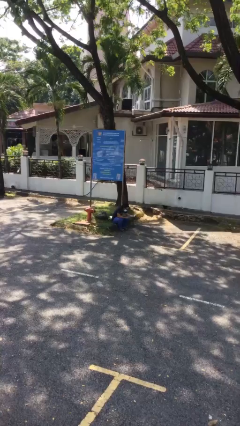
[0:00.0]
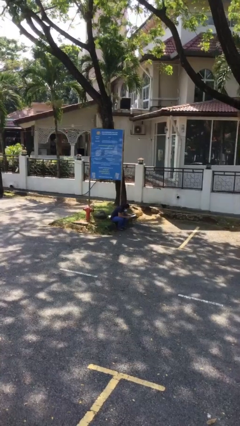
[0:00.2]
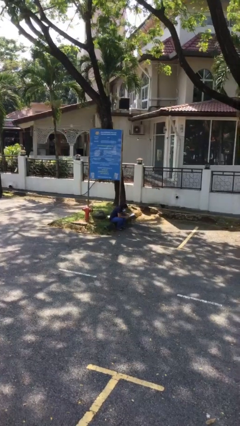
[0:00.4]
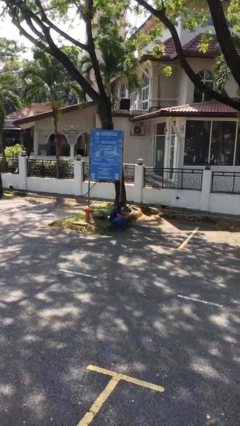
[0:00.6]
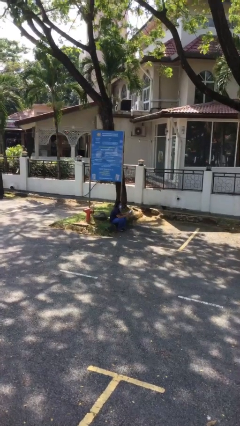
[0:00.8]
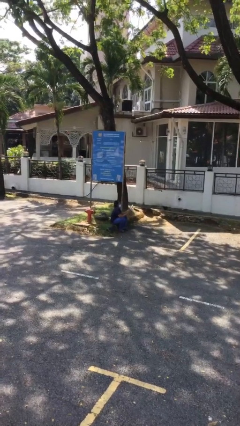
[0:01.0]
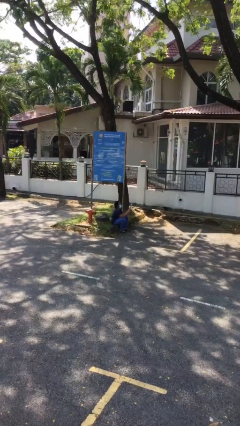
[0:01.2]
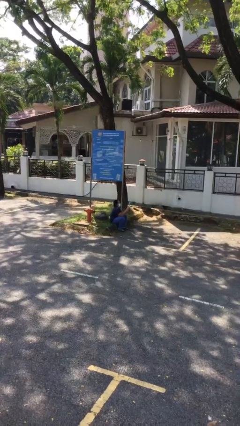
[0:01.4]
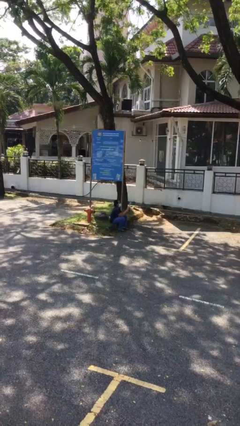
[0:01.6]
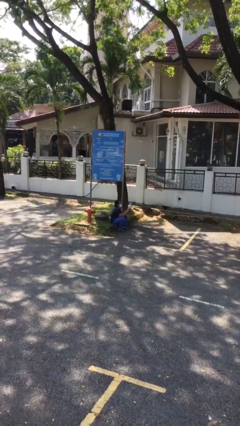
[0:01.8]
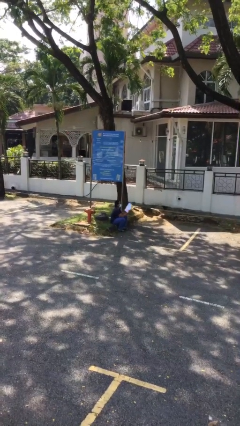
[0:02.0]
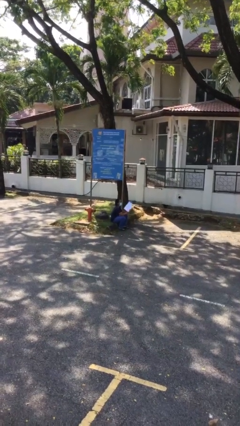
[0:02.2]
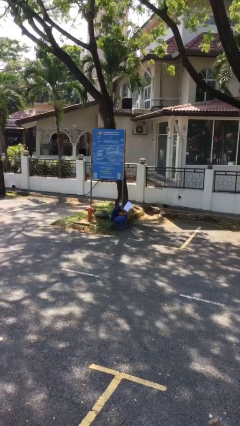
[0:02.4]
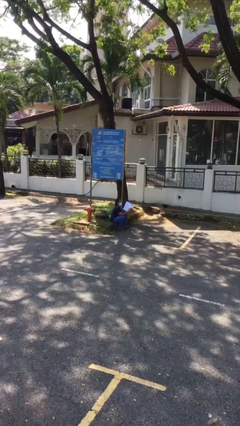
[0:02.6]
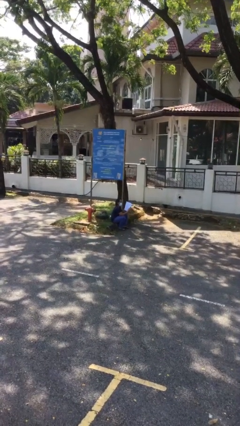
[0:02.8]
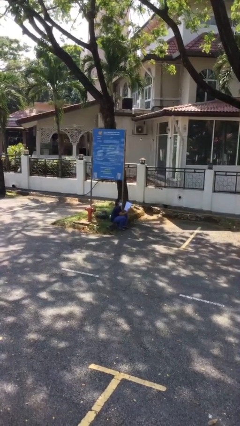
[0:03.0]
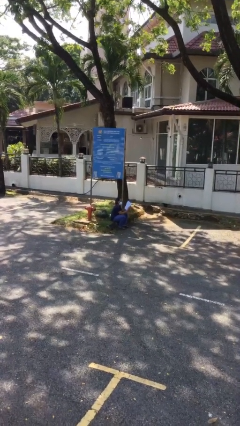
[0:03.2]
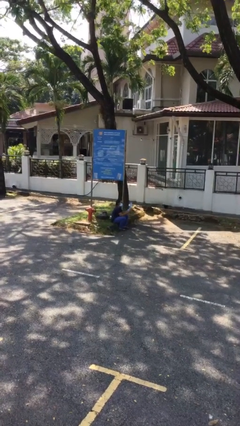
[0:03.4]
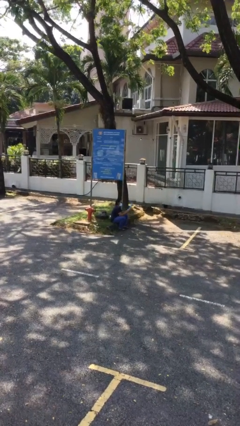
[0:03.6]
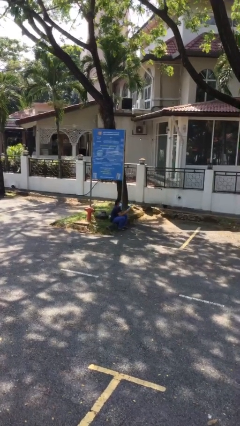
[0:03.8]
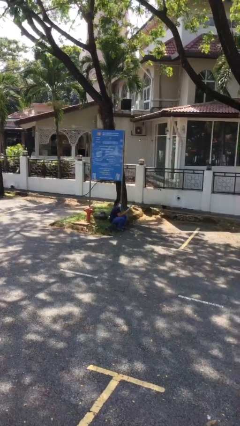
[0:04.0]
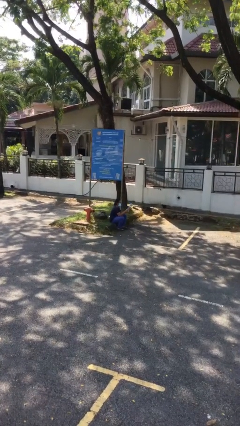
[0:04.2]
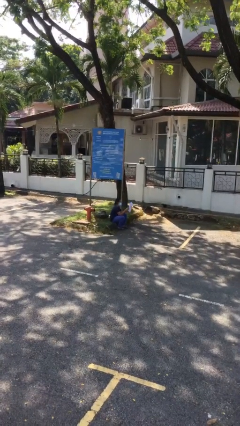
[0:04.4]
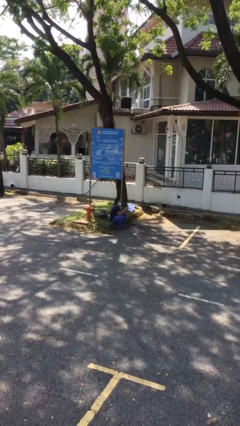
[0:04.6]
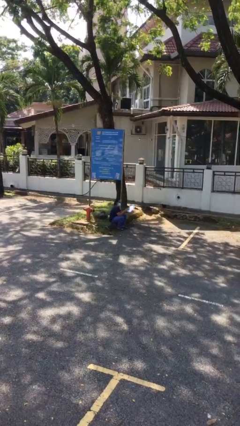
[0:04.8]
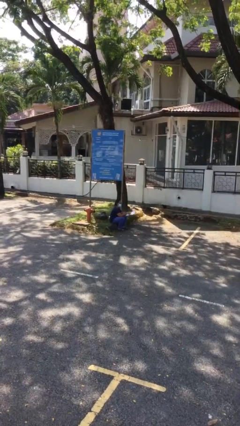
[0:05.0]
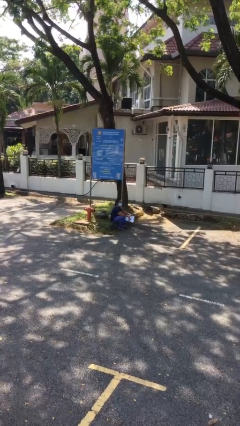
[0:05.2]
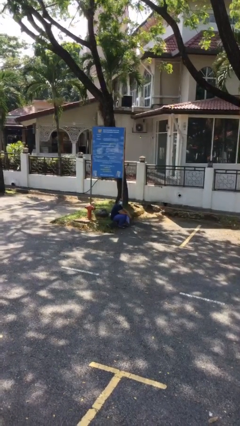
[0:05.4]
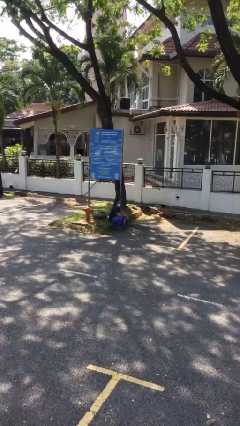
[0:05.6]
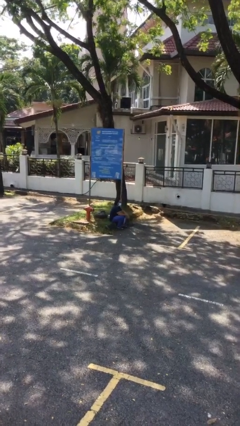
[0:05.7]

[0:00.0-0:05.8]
person reads document

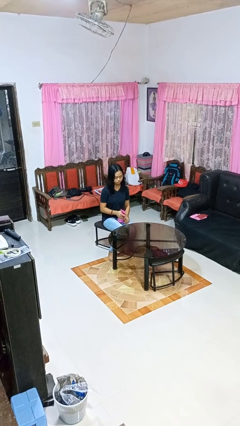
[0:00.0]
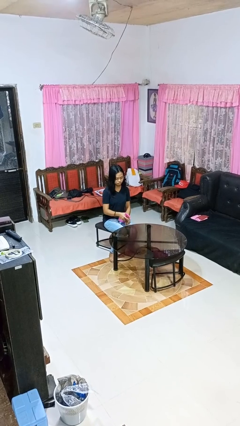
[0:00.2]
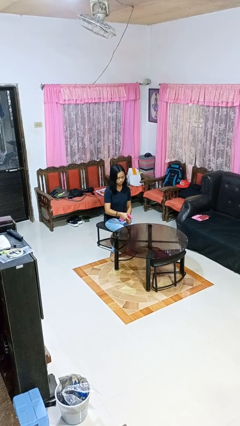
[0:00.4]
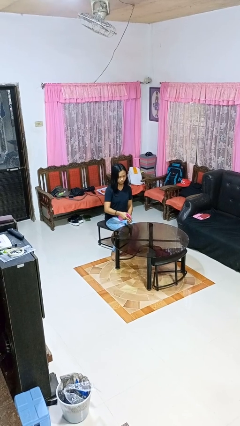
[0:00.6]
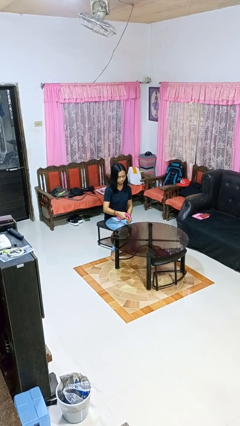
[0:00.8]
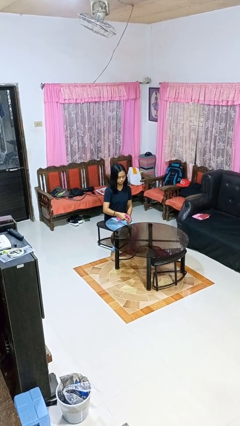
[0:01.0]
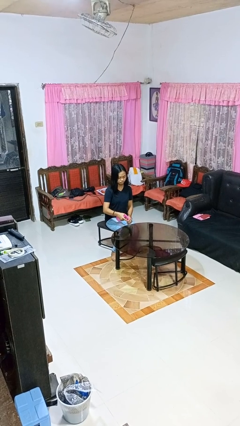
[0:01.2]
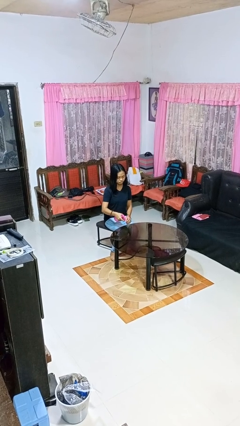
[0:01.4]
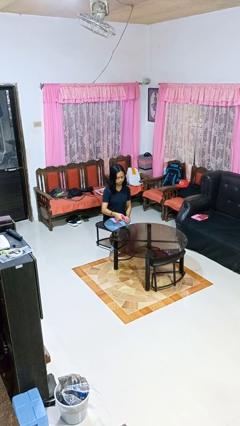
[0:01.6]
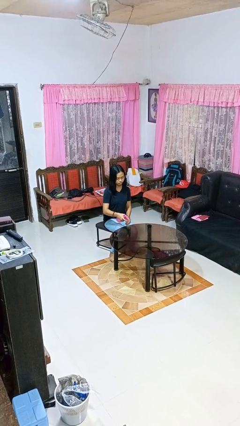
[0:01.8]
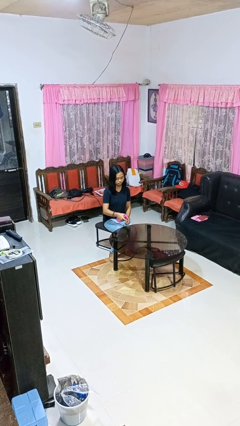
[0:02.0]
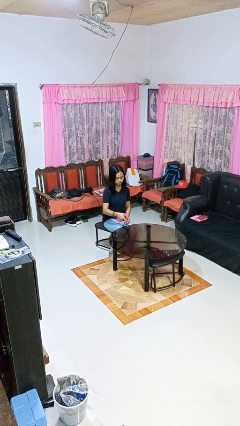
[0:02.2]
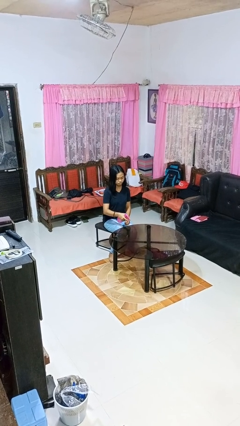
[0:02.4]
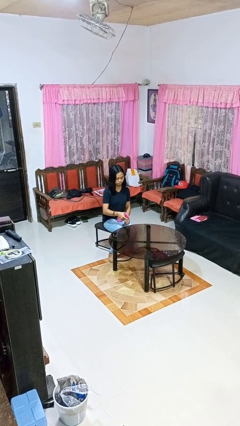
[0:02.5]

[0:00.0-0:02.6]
person sprays from bottle

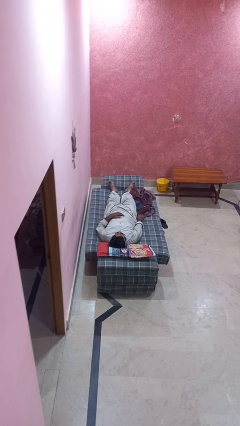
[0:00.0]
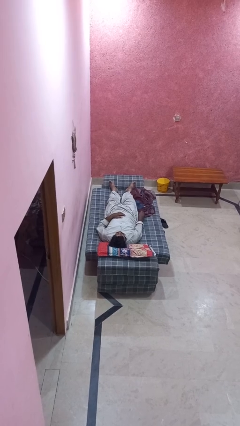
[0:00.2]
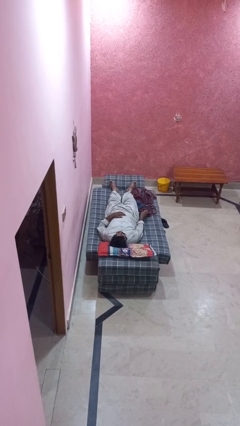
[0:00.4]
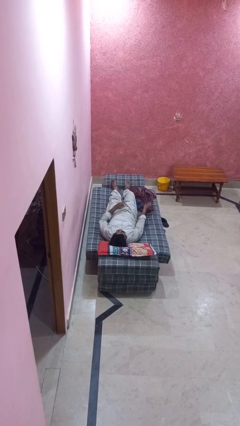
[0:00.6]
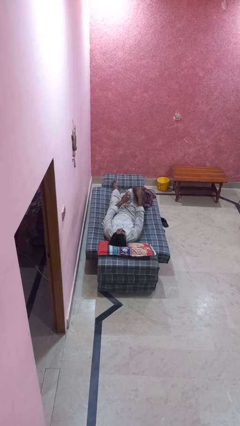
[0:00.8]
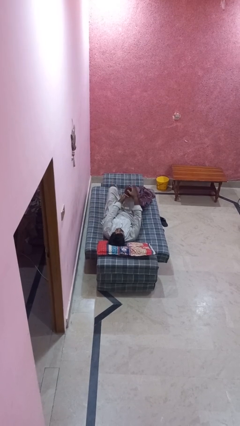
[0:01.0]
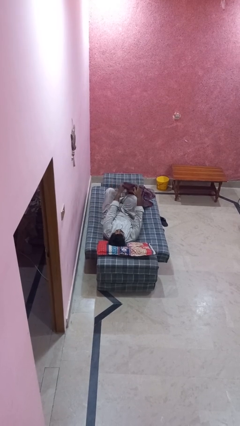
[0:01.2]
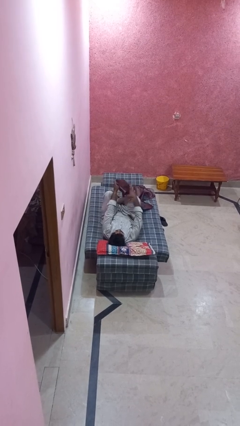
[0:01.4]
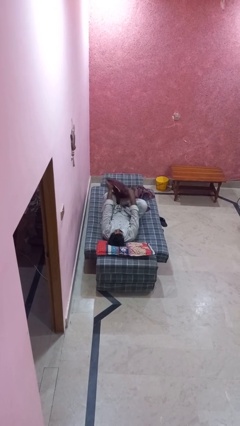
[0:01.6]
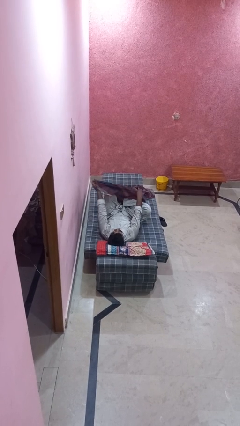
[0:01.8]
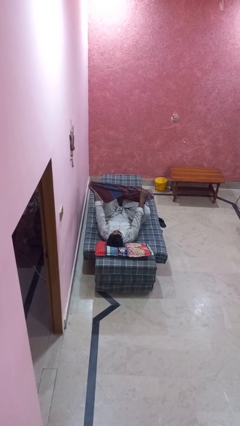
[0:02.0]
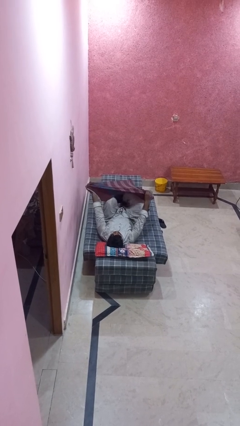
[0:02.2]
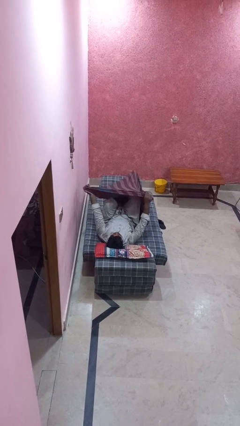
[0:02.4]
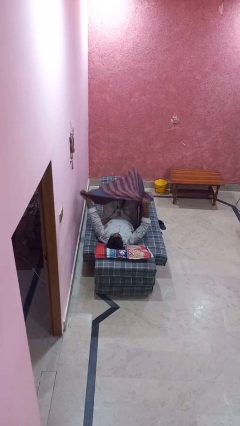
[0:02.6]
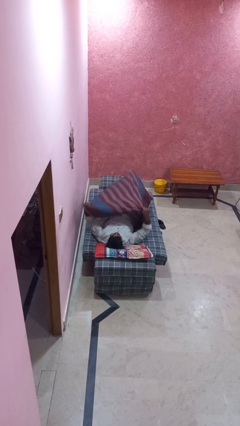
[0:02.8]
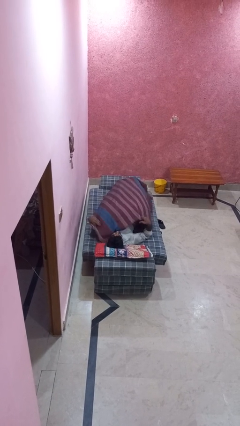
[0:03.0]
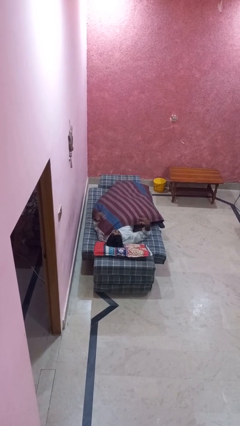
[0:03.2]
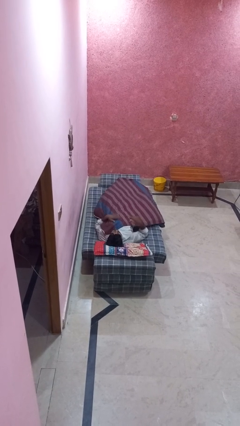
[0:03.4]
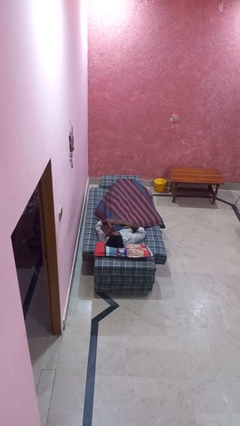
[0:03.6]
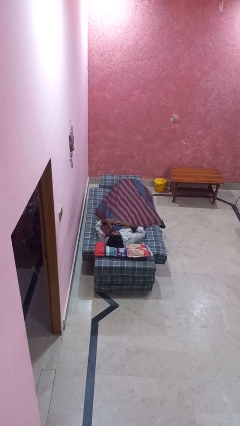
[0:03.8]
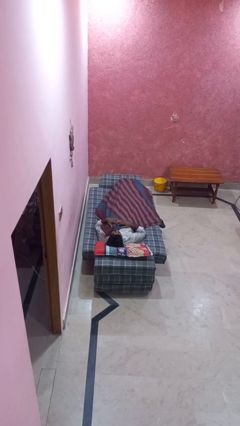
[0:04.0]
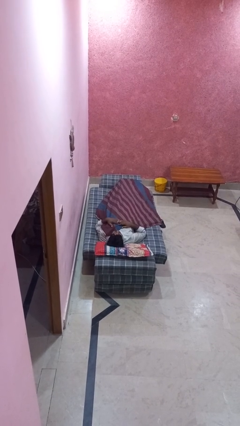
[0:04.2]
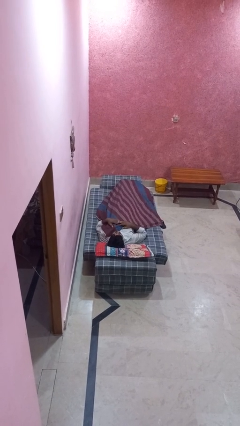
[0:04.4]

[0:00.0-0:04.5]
person covers with bedsheets

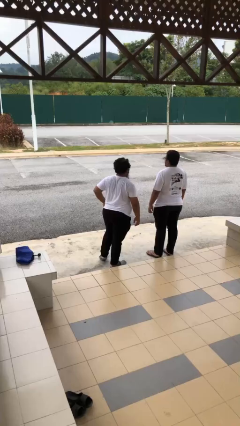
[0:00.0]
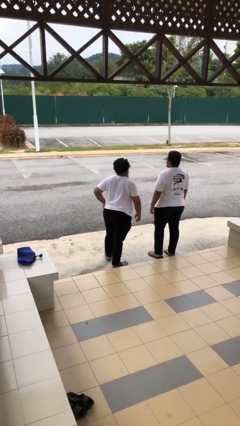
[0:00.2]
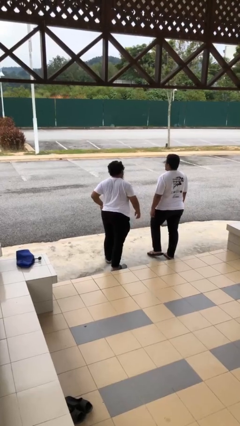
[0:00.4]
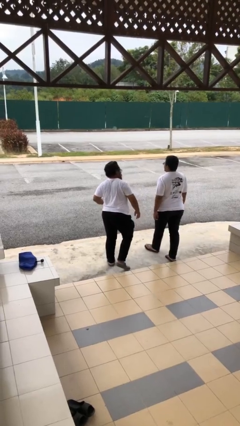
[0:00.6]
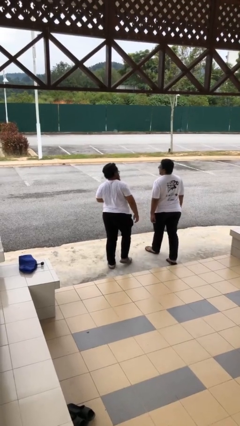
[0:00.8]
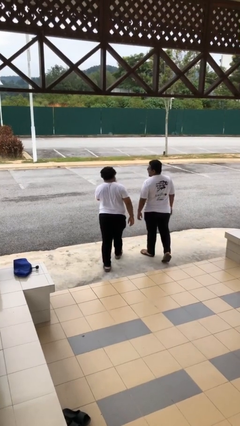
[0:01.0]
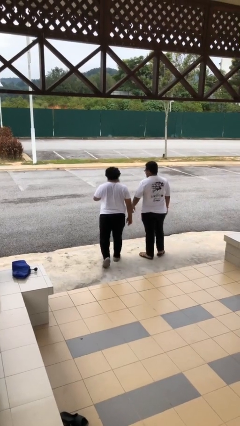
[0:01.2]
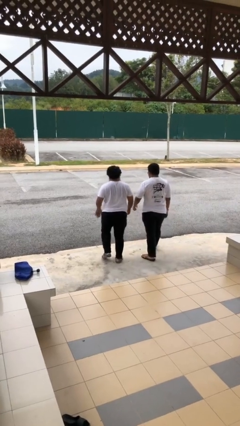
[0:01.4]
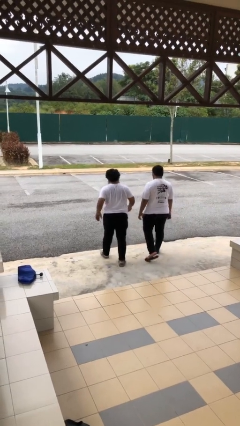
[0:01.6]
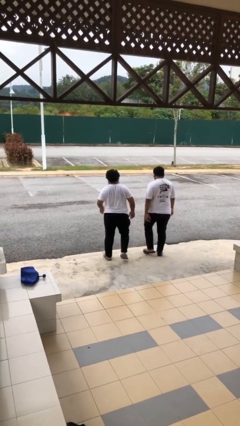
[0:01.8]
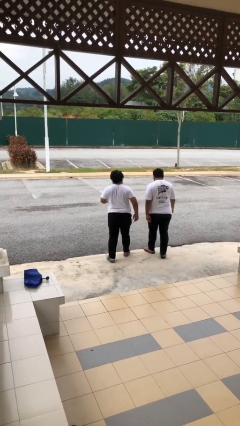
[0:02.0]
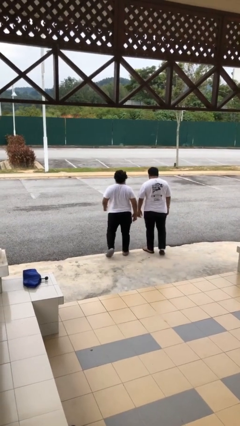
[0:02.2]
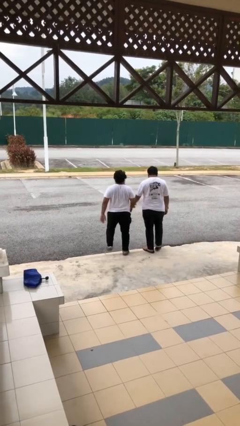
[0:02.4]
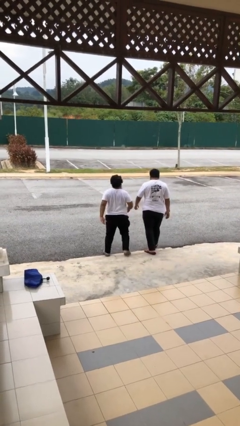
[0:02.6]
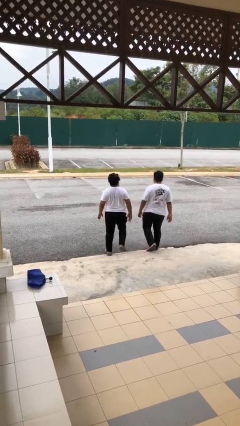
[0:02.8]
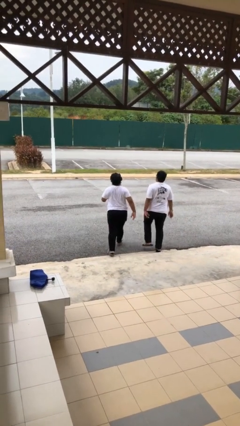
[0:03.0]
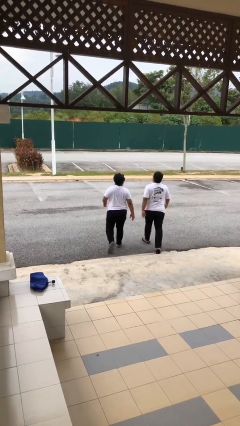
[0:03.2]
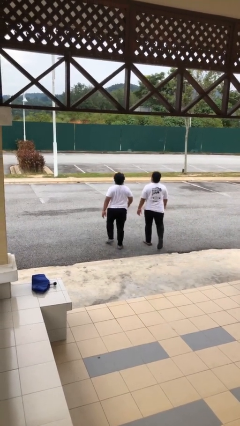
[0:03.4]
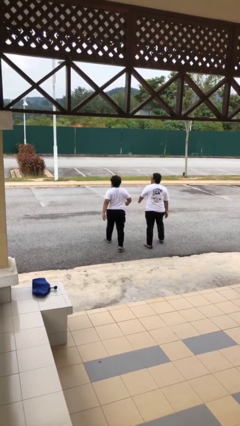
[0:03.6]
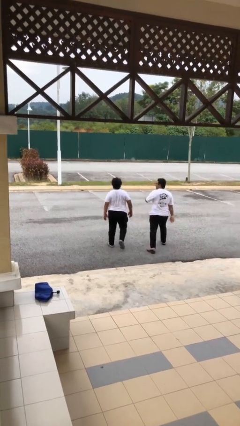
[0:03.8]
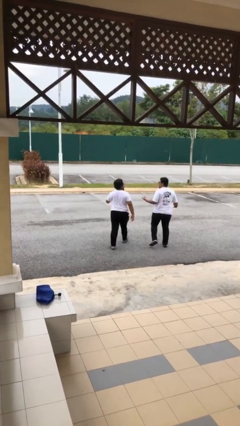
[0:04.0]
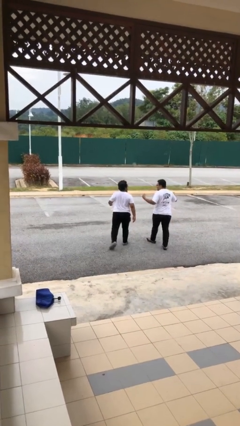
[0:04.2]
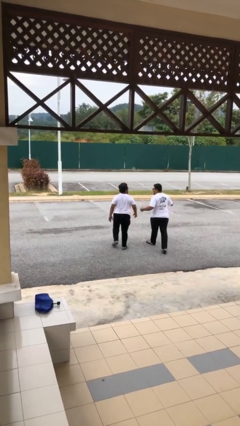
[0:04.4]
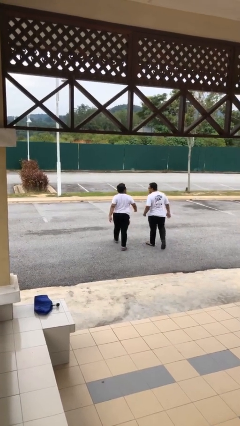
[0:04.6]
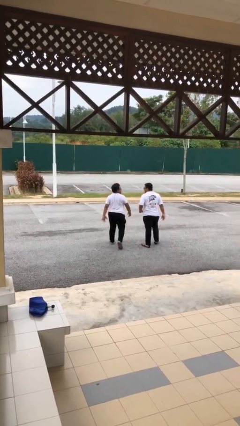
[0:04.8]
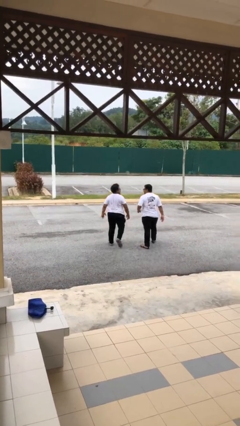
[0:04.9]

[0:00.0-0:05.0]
person talks to person

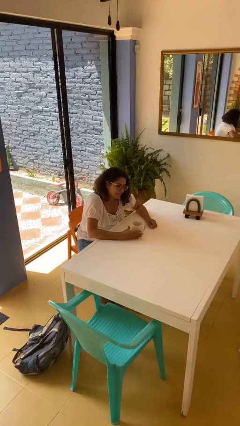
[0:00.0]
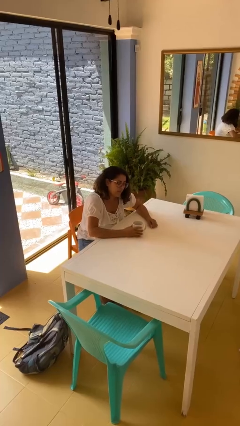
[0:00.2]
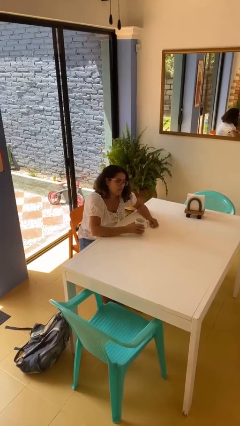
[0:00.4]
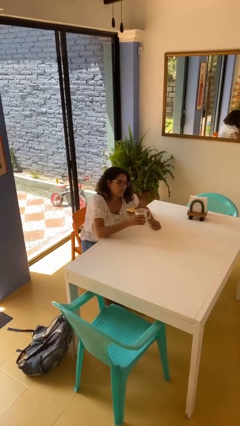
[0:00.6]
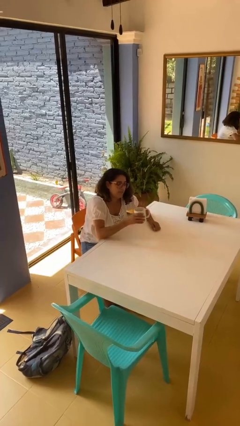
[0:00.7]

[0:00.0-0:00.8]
person picks up object from table
